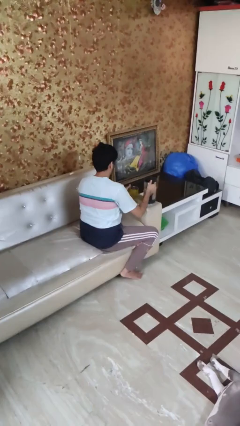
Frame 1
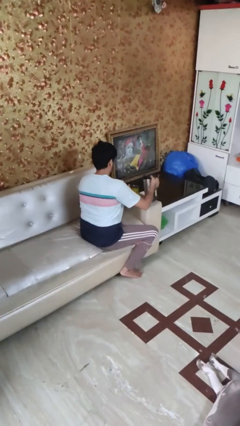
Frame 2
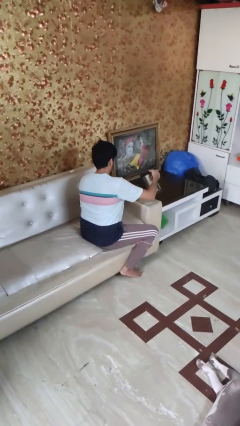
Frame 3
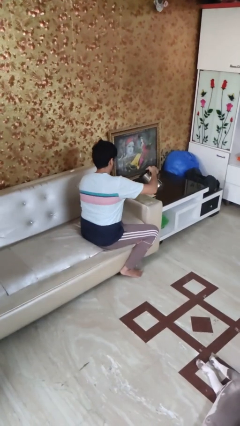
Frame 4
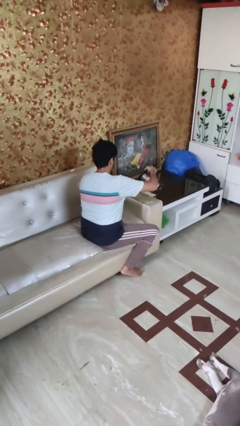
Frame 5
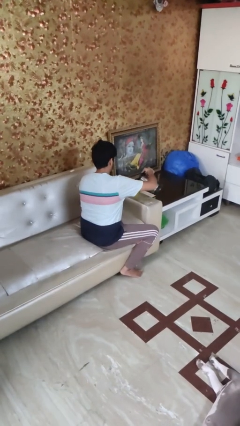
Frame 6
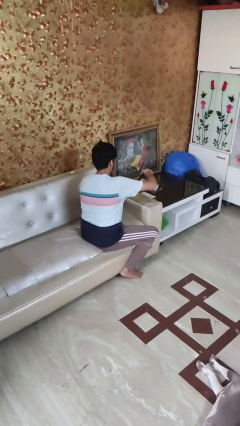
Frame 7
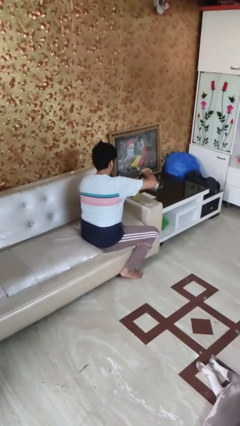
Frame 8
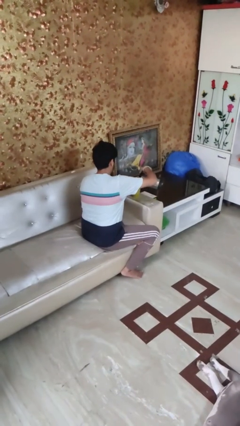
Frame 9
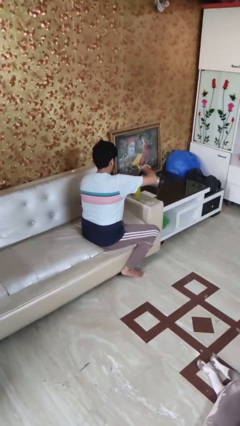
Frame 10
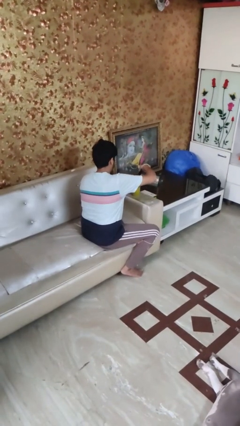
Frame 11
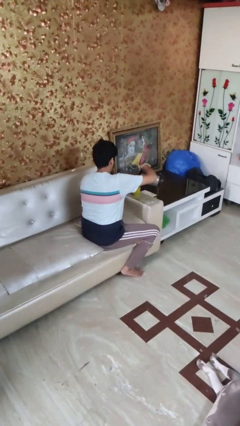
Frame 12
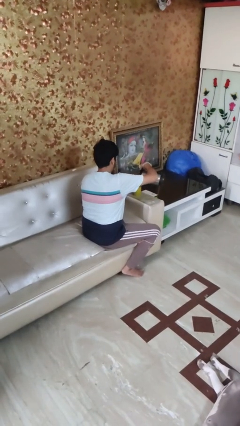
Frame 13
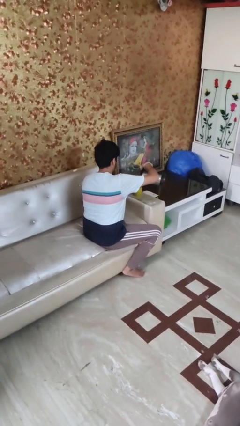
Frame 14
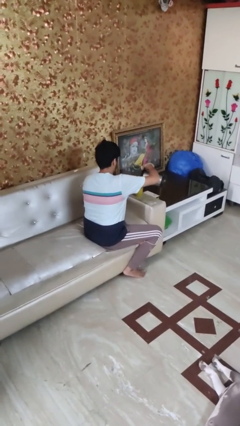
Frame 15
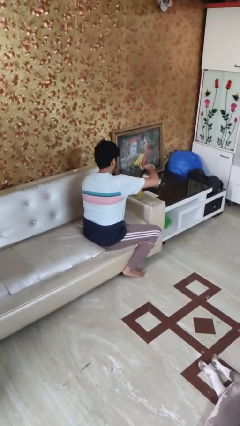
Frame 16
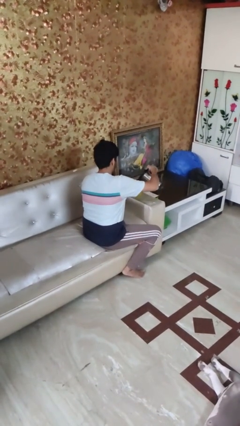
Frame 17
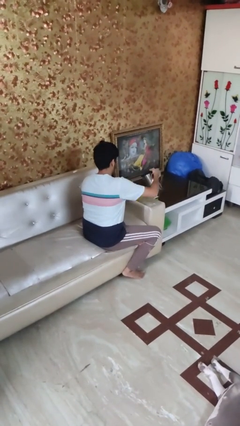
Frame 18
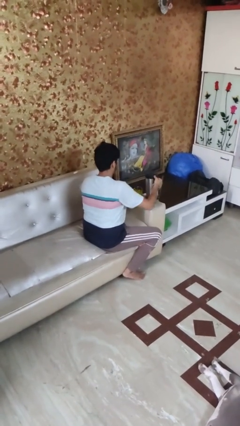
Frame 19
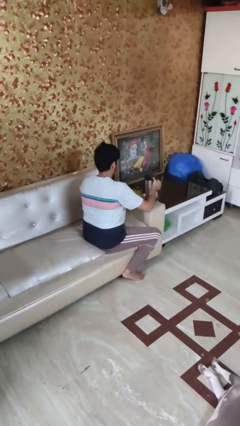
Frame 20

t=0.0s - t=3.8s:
person pours coffee into mug

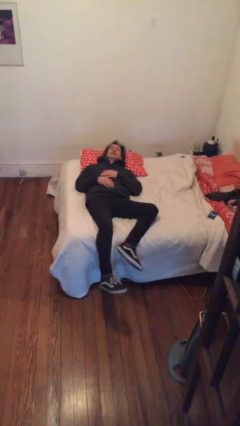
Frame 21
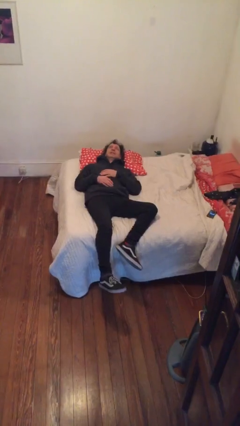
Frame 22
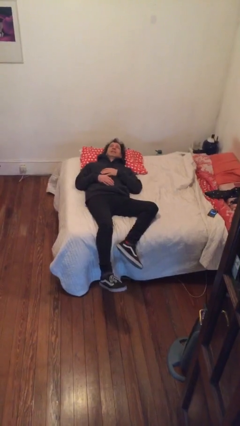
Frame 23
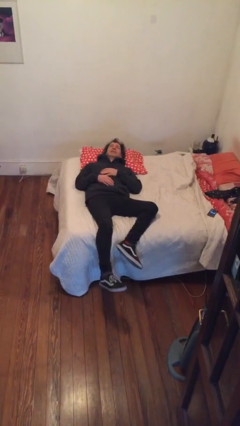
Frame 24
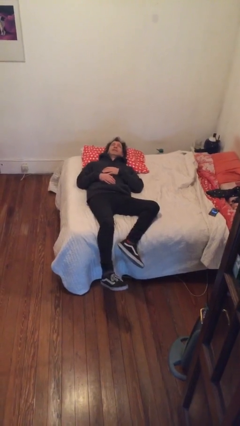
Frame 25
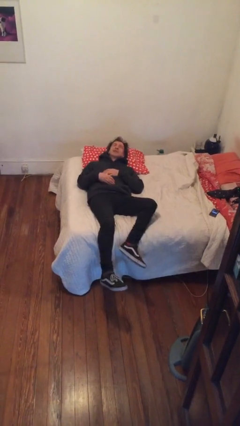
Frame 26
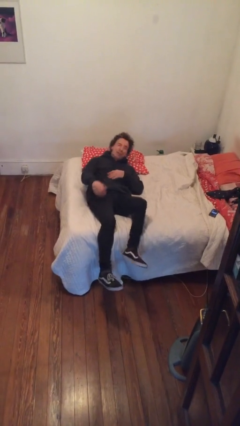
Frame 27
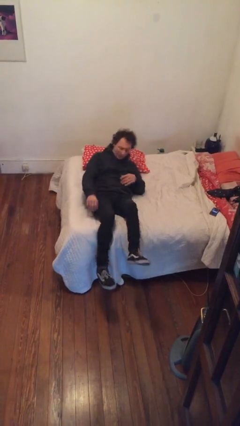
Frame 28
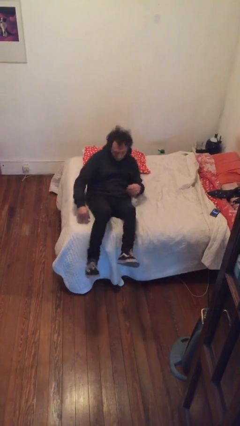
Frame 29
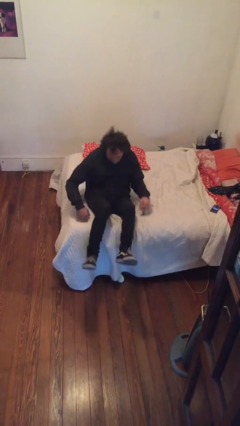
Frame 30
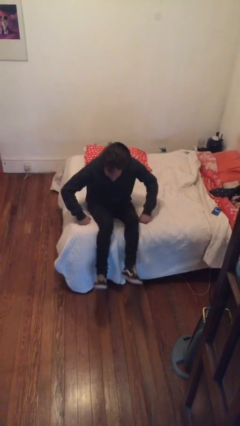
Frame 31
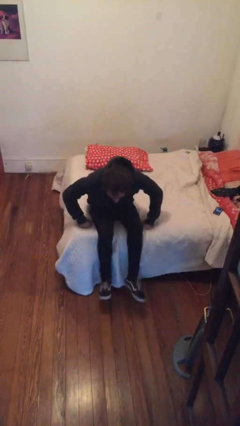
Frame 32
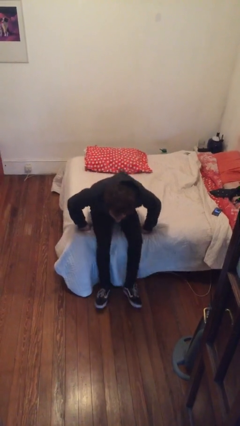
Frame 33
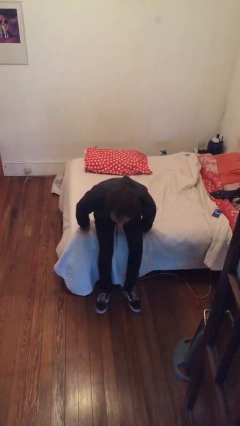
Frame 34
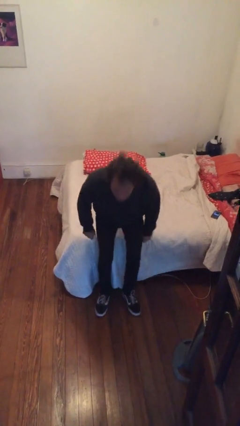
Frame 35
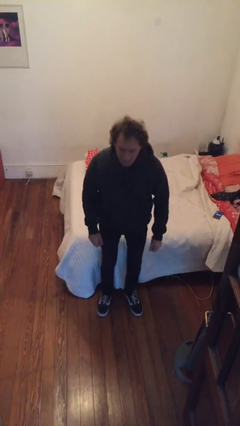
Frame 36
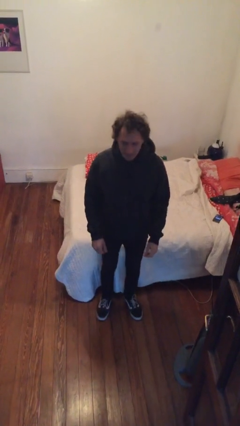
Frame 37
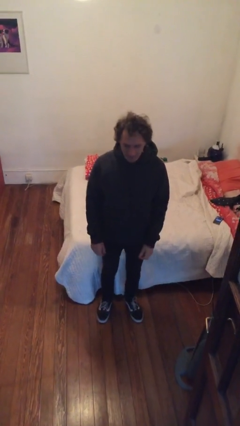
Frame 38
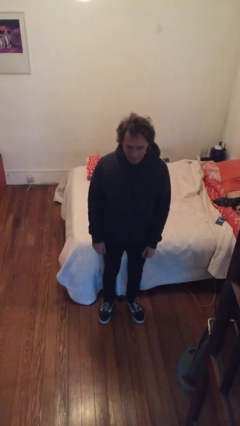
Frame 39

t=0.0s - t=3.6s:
person stands up

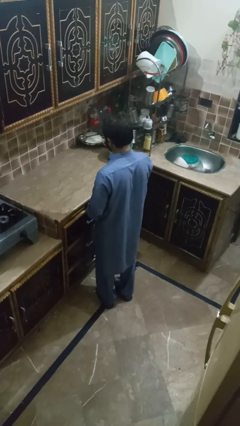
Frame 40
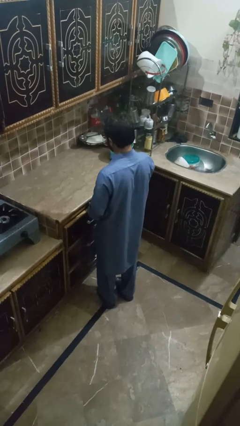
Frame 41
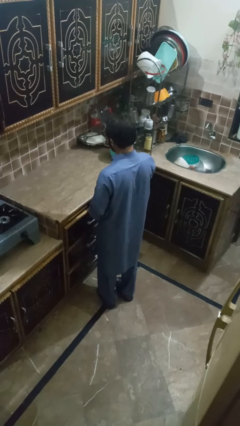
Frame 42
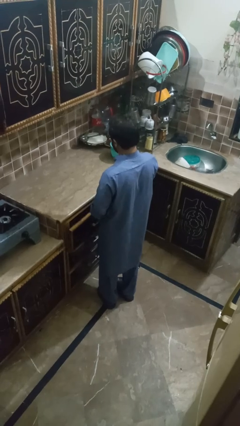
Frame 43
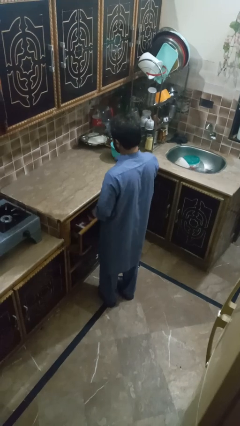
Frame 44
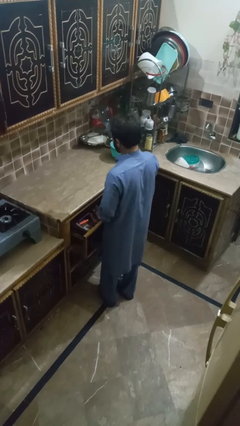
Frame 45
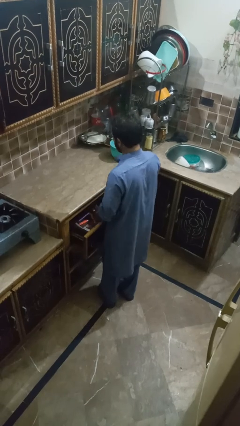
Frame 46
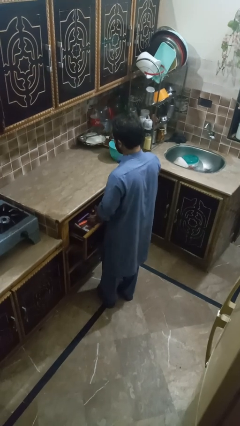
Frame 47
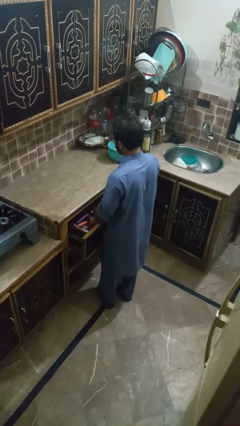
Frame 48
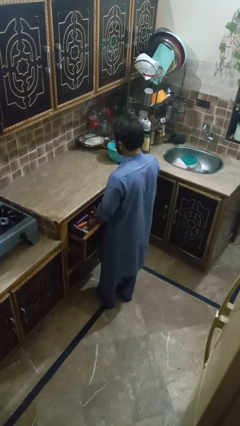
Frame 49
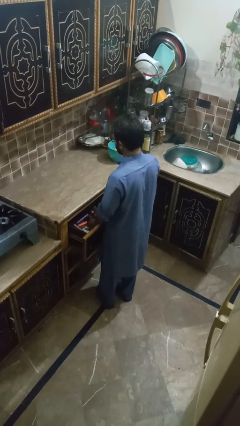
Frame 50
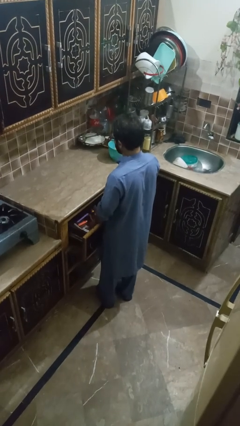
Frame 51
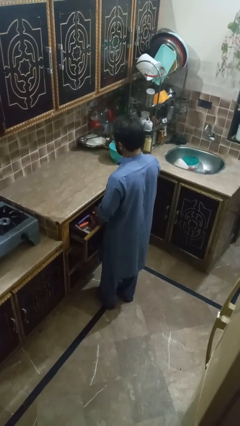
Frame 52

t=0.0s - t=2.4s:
person searches in kitchen drawer

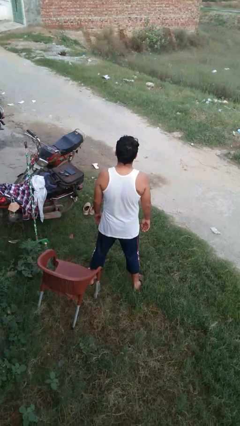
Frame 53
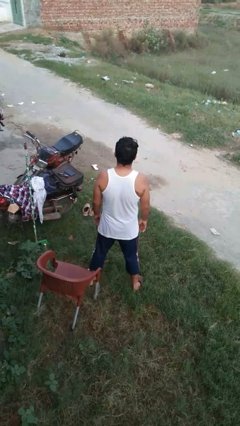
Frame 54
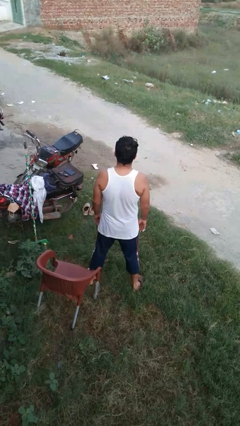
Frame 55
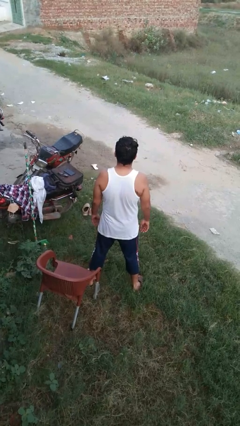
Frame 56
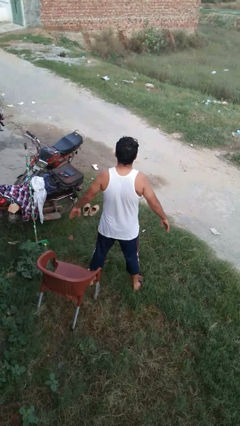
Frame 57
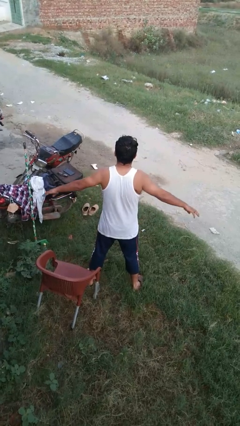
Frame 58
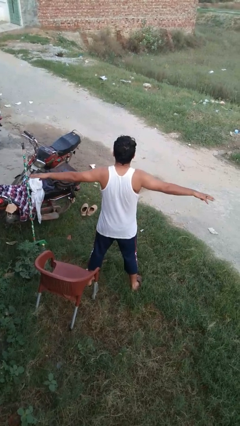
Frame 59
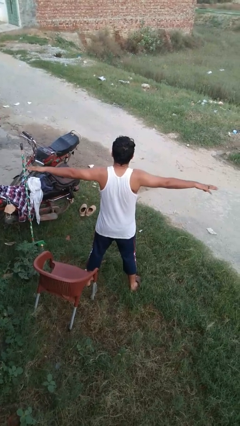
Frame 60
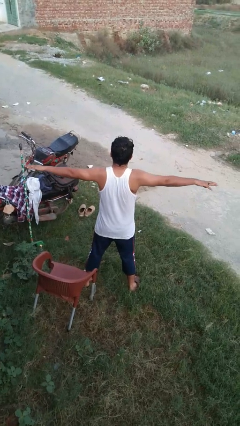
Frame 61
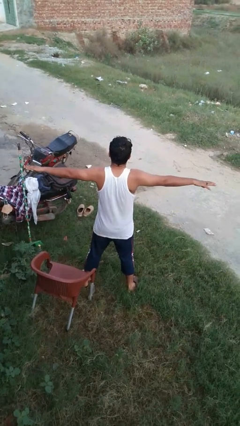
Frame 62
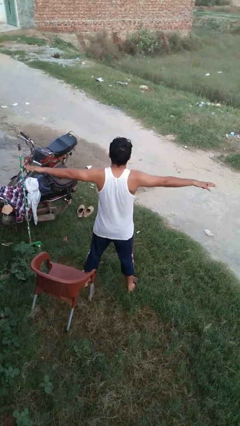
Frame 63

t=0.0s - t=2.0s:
person stretches arms to side

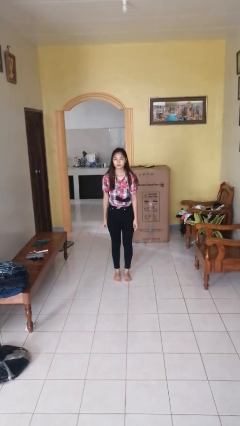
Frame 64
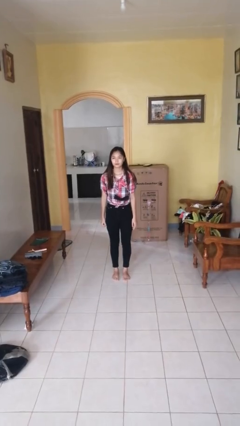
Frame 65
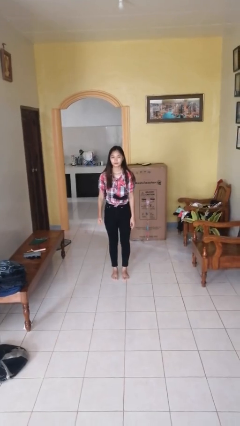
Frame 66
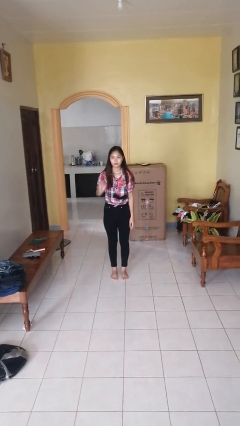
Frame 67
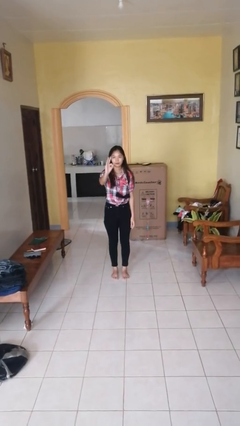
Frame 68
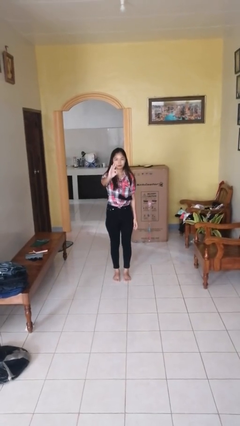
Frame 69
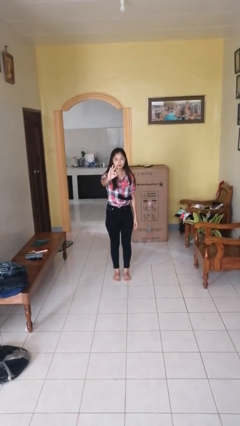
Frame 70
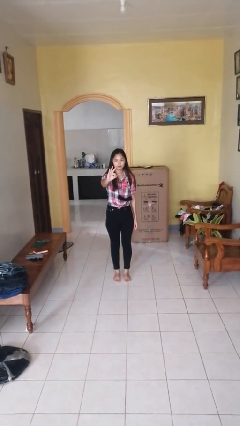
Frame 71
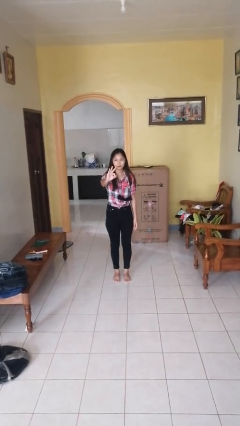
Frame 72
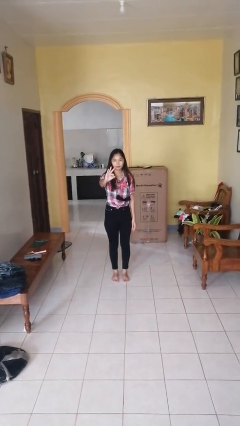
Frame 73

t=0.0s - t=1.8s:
person gestures number three

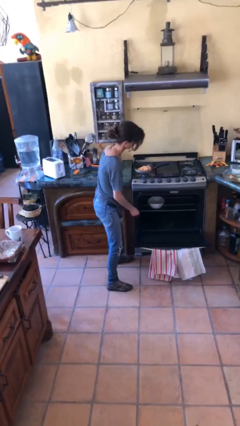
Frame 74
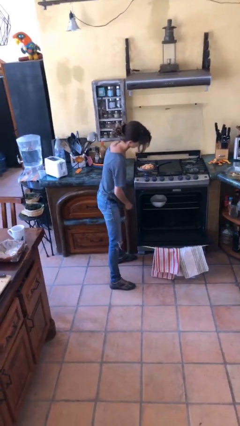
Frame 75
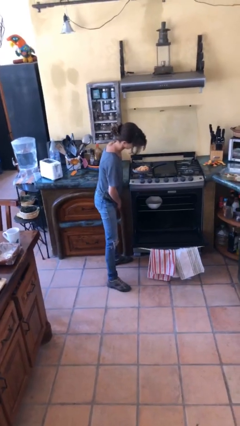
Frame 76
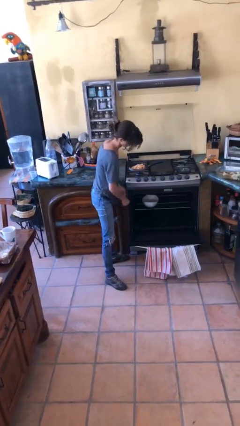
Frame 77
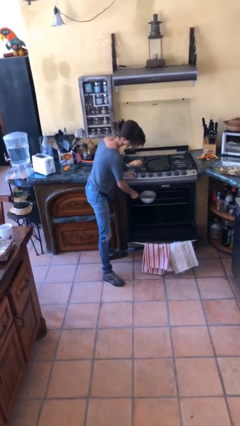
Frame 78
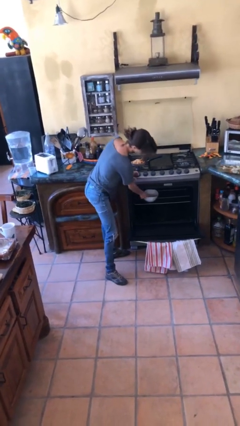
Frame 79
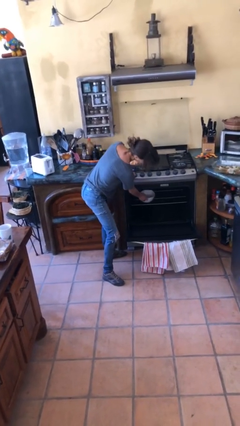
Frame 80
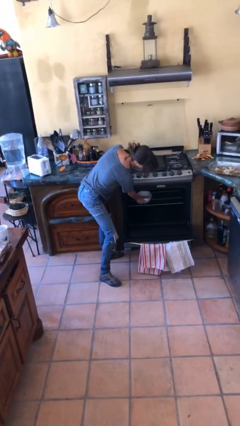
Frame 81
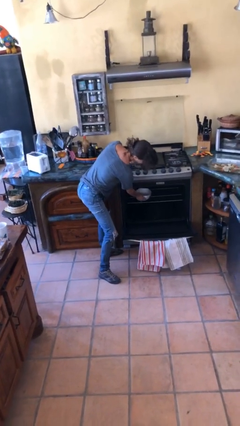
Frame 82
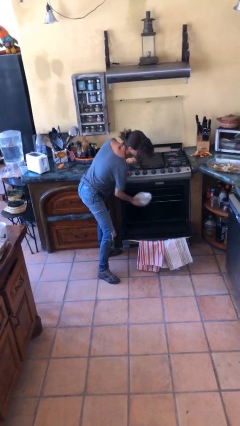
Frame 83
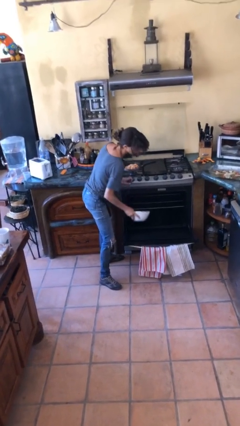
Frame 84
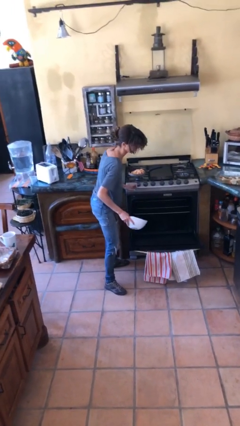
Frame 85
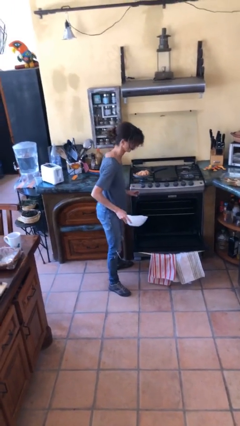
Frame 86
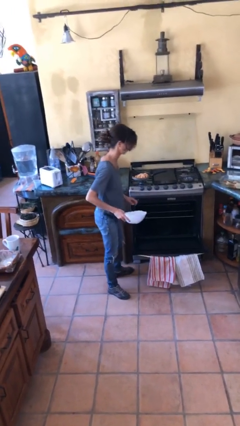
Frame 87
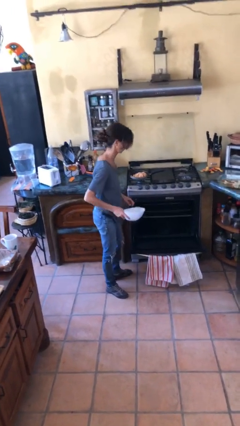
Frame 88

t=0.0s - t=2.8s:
person takes object from oven

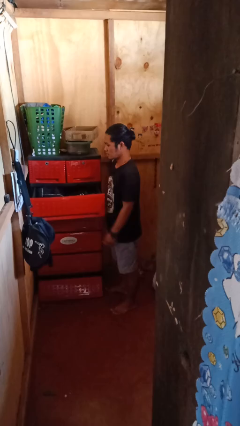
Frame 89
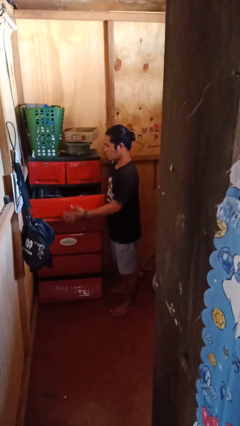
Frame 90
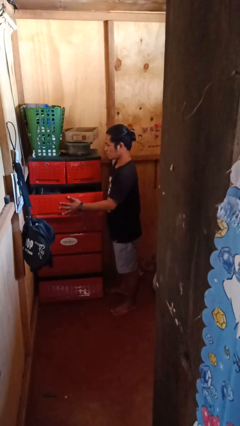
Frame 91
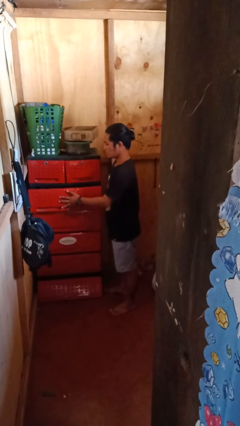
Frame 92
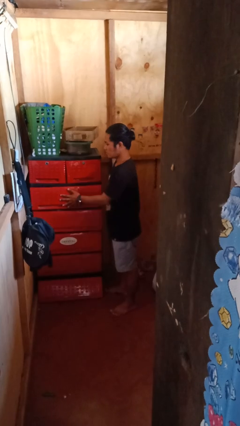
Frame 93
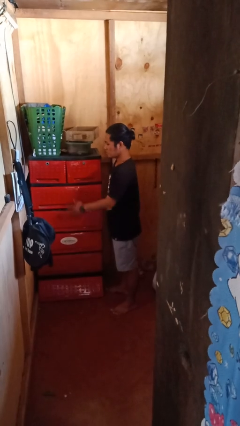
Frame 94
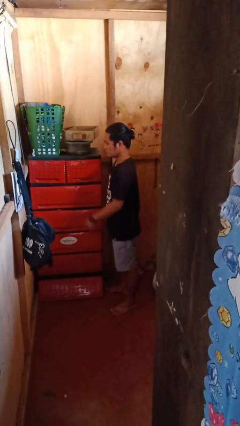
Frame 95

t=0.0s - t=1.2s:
person closes dresser drawer
